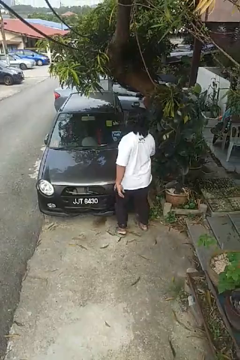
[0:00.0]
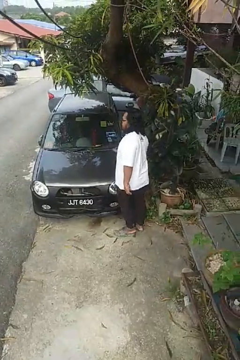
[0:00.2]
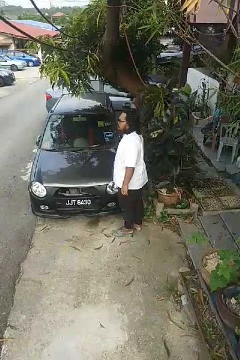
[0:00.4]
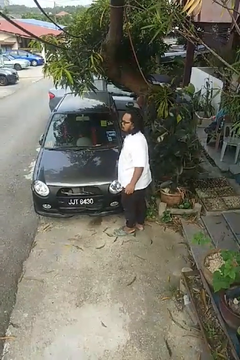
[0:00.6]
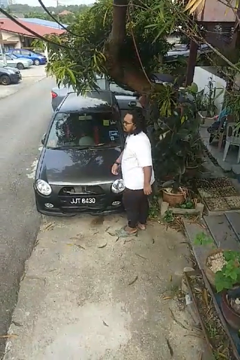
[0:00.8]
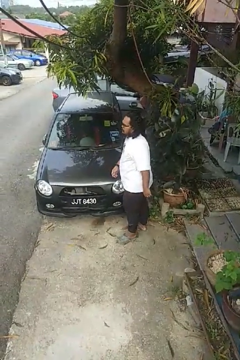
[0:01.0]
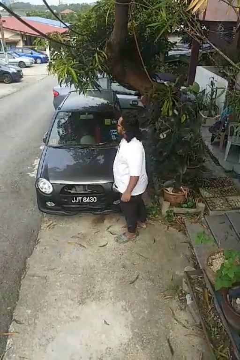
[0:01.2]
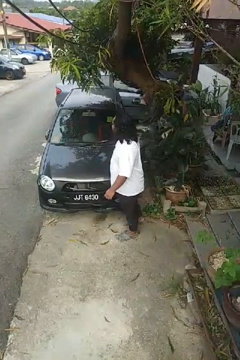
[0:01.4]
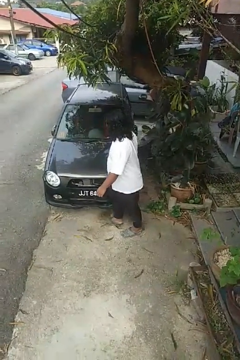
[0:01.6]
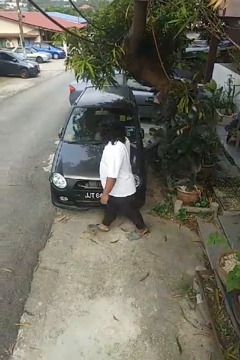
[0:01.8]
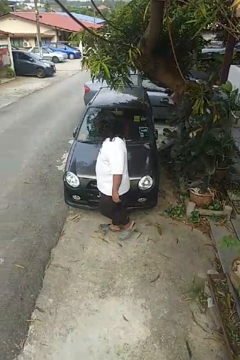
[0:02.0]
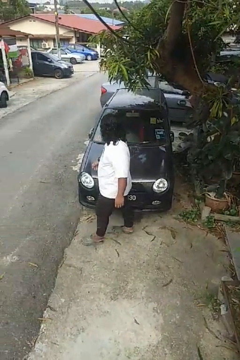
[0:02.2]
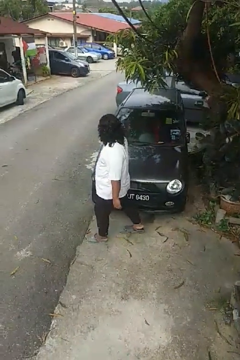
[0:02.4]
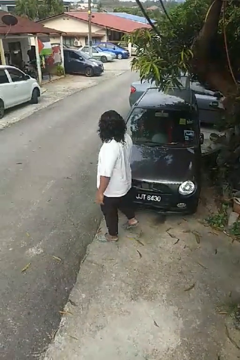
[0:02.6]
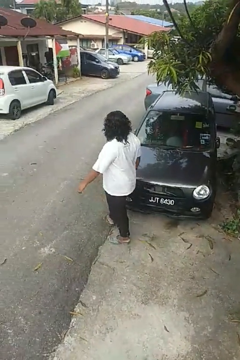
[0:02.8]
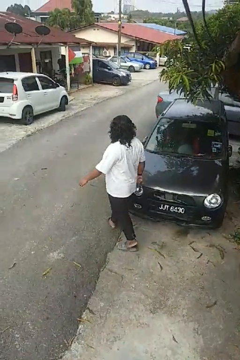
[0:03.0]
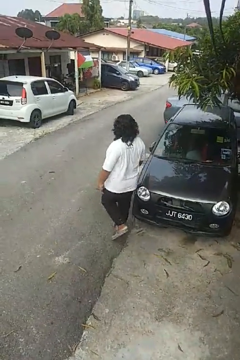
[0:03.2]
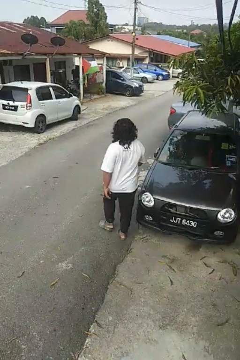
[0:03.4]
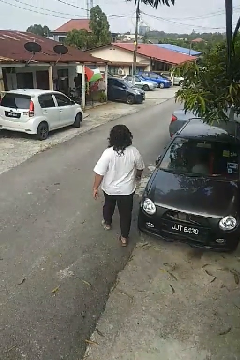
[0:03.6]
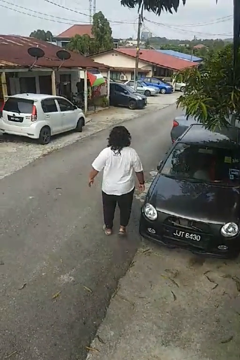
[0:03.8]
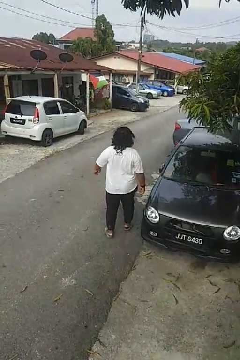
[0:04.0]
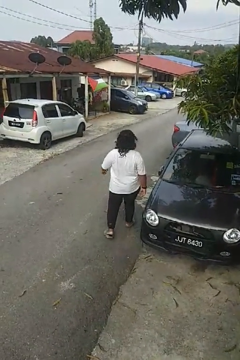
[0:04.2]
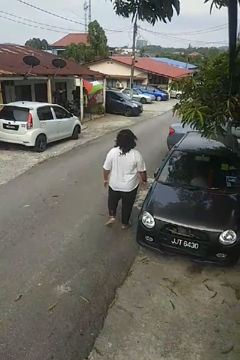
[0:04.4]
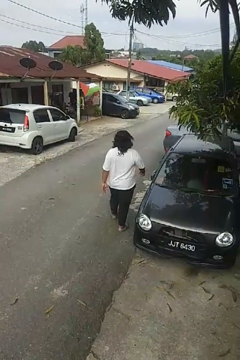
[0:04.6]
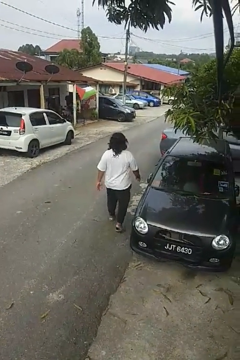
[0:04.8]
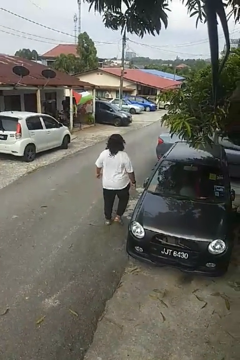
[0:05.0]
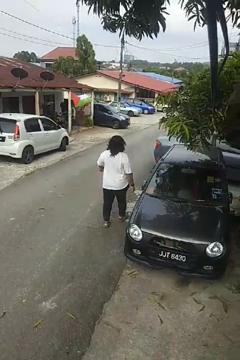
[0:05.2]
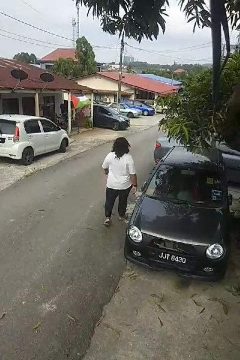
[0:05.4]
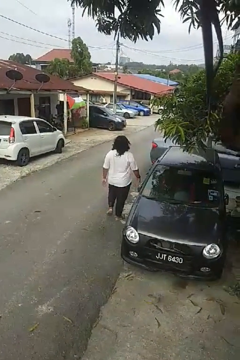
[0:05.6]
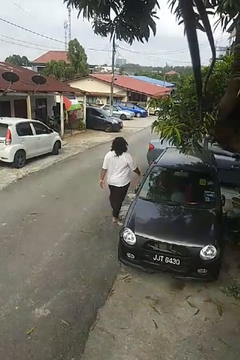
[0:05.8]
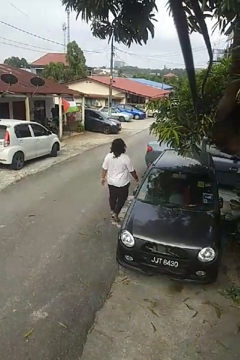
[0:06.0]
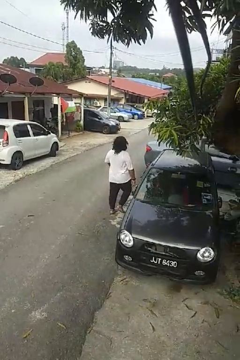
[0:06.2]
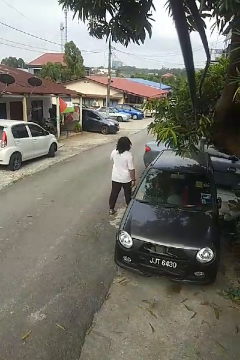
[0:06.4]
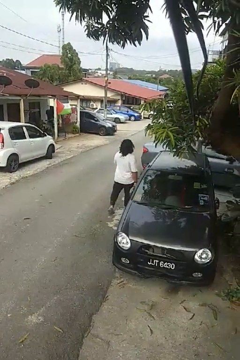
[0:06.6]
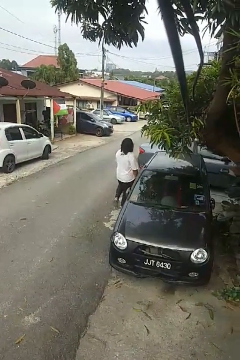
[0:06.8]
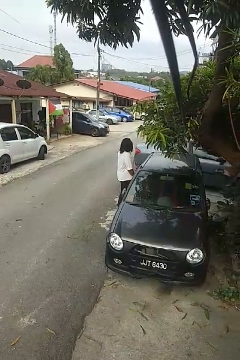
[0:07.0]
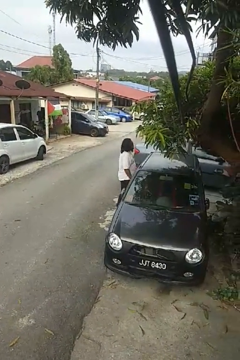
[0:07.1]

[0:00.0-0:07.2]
person walks around car

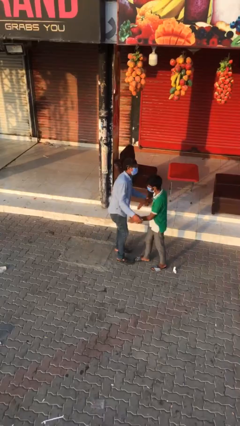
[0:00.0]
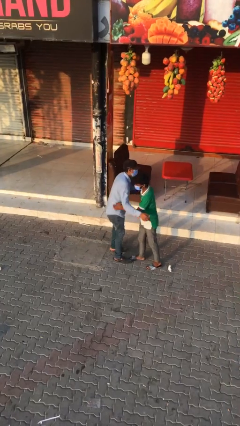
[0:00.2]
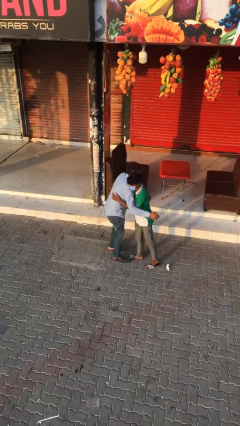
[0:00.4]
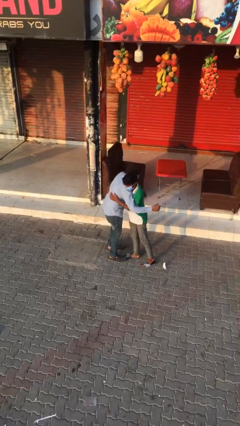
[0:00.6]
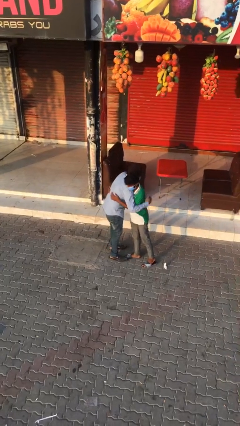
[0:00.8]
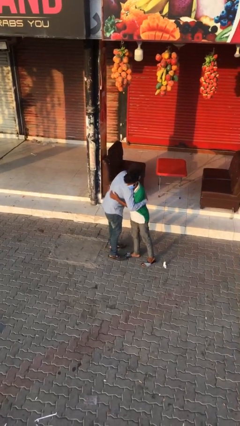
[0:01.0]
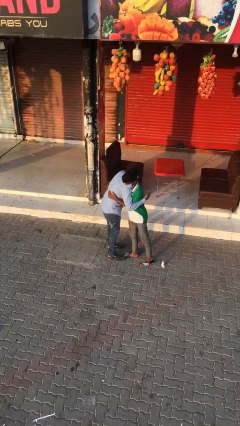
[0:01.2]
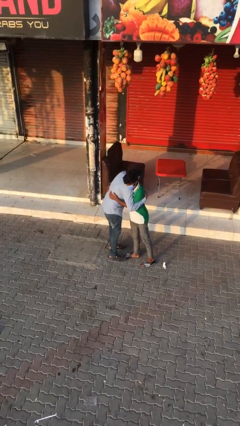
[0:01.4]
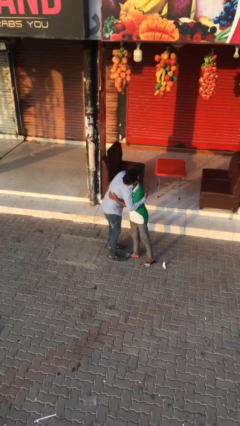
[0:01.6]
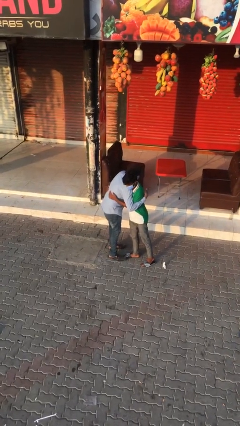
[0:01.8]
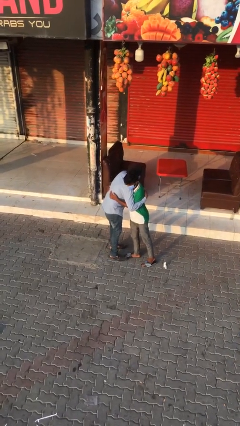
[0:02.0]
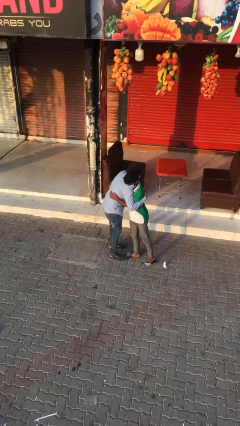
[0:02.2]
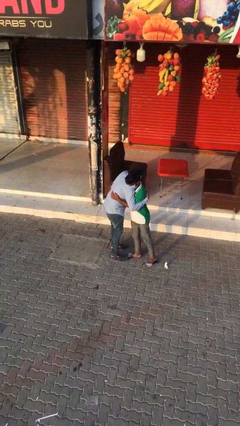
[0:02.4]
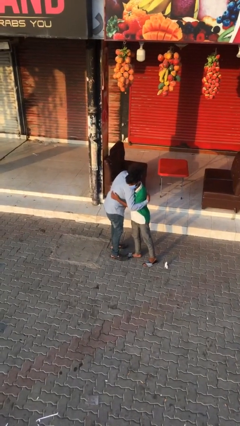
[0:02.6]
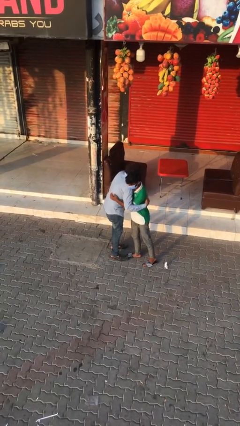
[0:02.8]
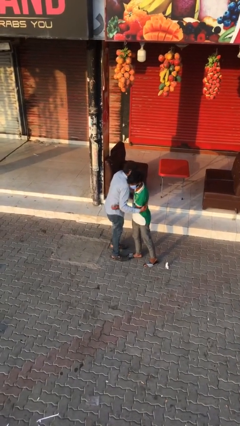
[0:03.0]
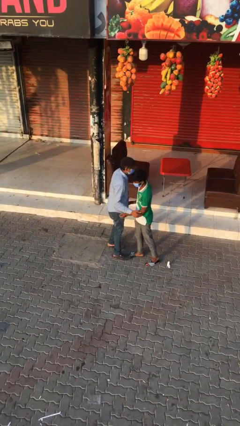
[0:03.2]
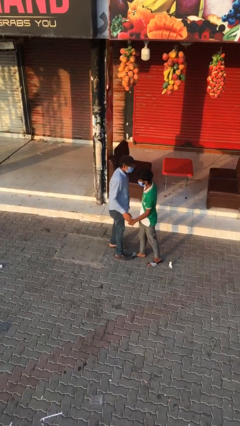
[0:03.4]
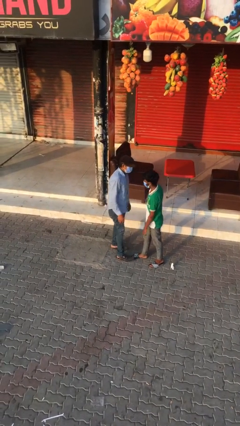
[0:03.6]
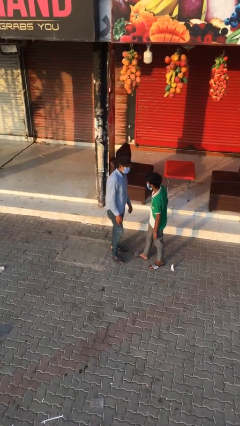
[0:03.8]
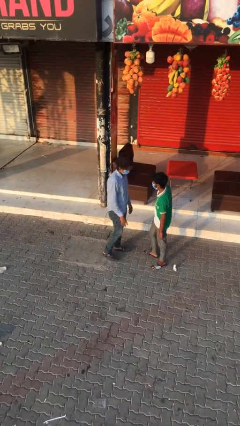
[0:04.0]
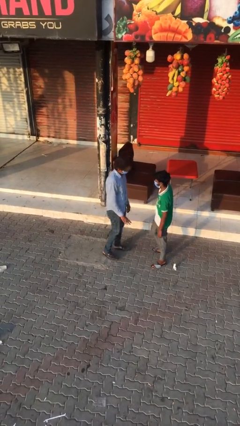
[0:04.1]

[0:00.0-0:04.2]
person embraces person

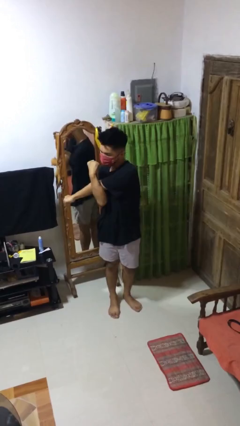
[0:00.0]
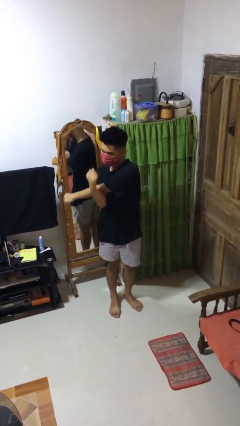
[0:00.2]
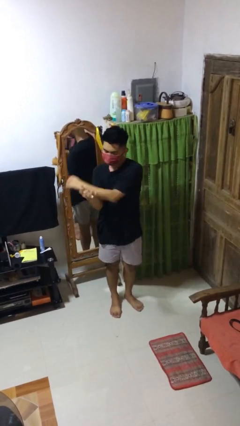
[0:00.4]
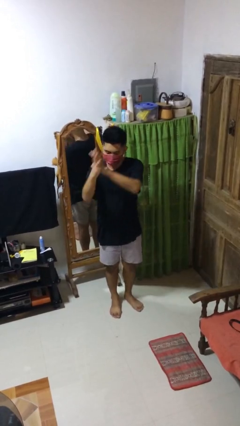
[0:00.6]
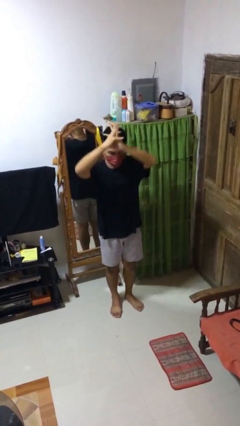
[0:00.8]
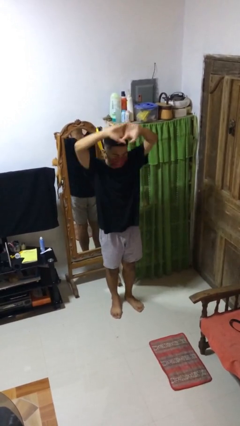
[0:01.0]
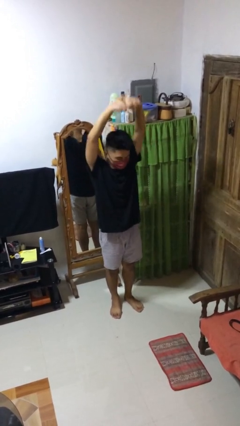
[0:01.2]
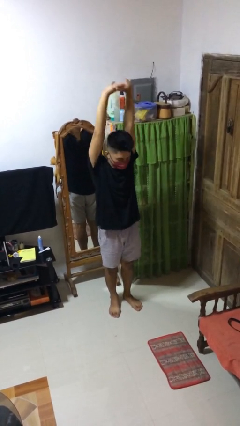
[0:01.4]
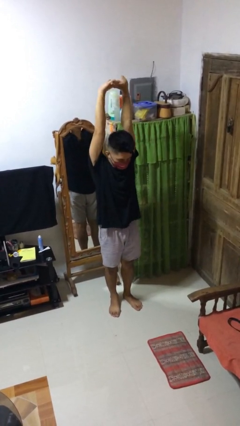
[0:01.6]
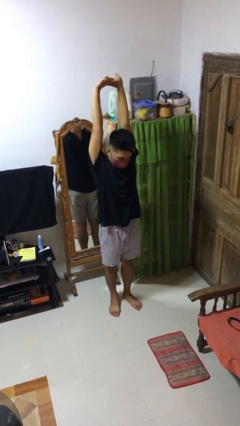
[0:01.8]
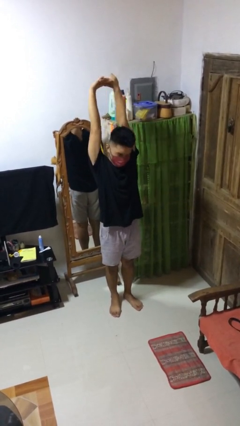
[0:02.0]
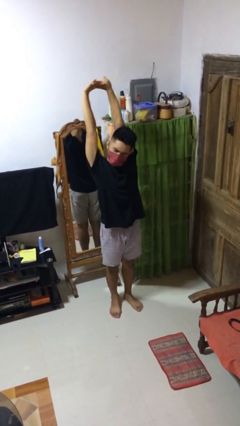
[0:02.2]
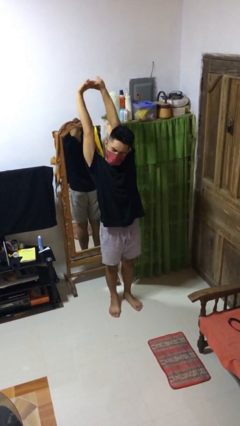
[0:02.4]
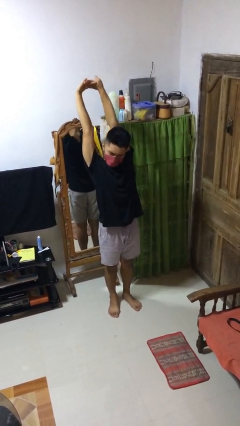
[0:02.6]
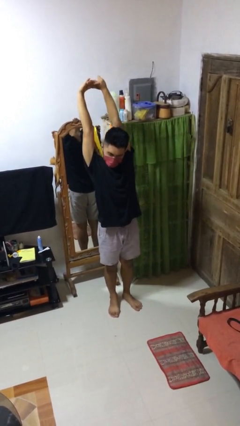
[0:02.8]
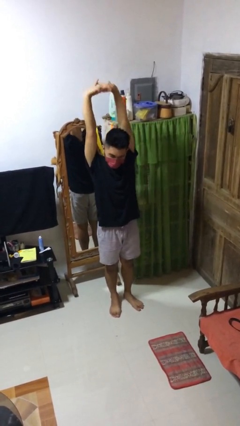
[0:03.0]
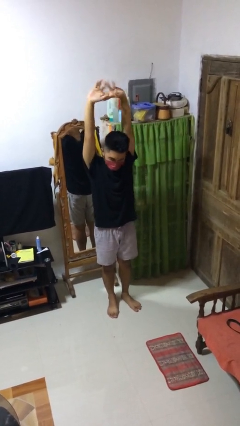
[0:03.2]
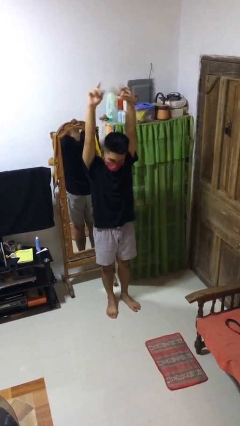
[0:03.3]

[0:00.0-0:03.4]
person stretches arms over head

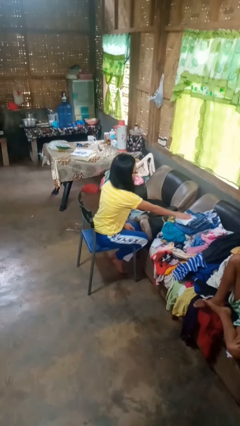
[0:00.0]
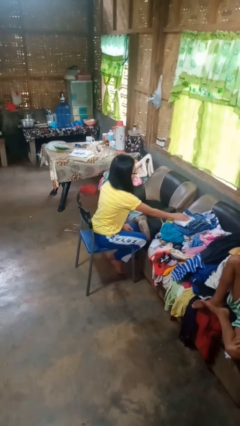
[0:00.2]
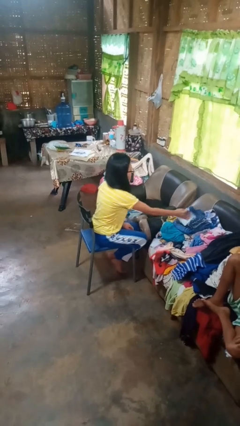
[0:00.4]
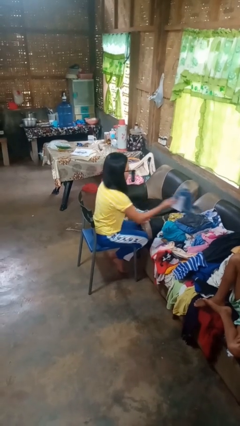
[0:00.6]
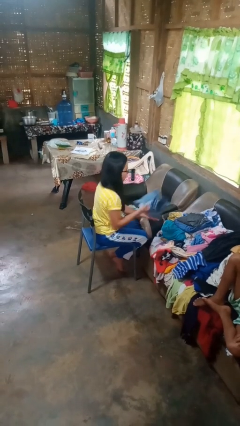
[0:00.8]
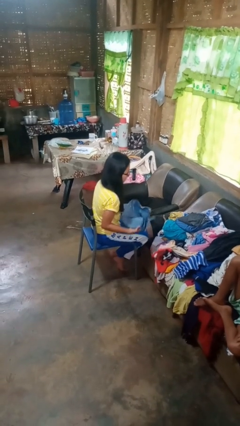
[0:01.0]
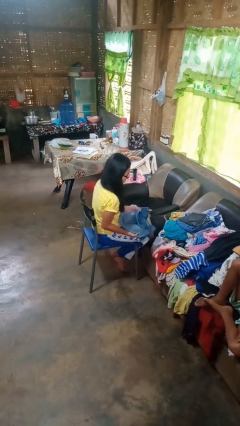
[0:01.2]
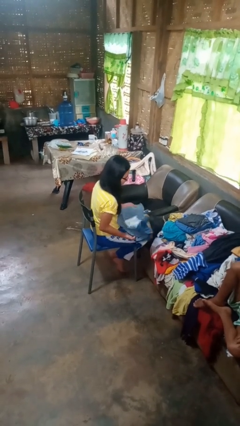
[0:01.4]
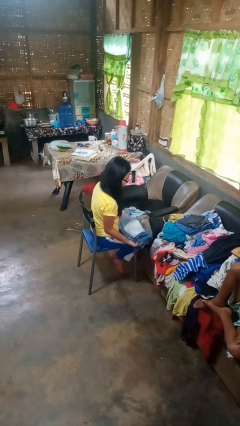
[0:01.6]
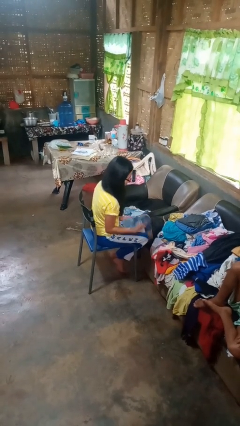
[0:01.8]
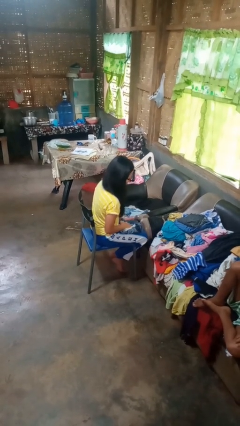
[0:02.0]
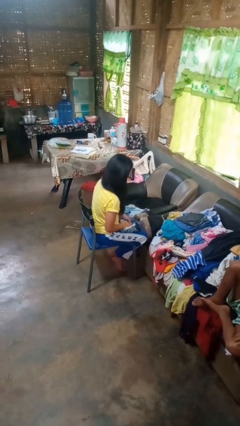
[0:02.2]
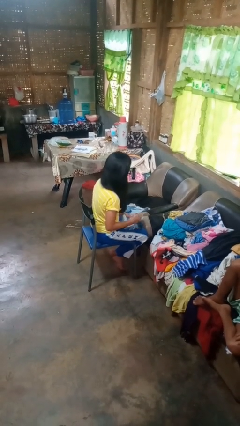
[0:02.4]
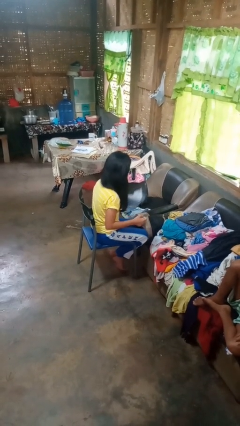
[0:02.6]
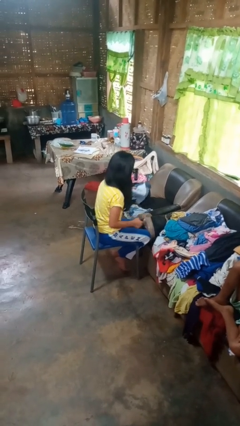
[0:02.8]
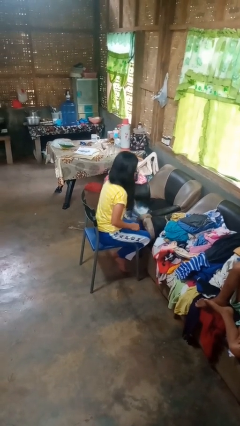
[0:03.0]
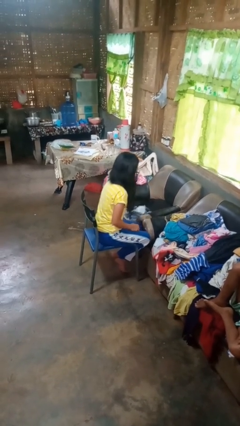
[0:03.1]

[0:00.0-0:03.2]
person folds pants

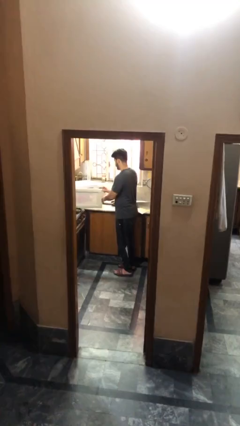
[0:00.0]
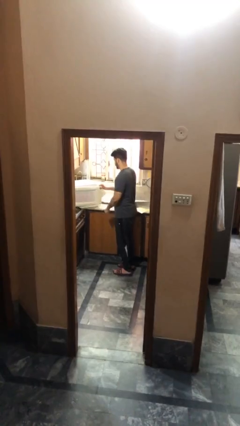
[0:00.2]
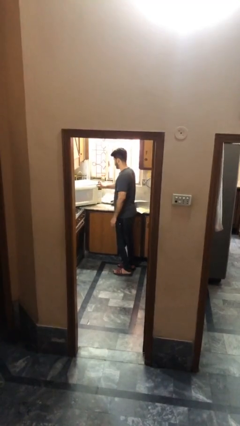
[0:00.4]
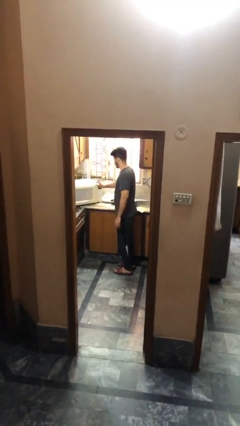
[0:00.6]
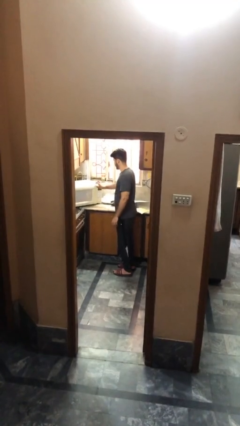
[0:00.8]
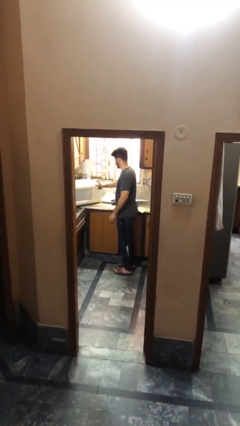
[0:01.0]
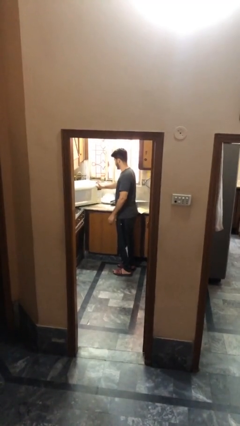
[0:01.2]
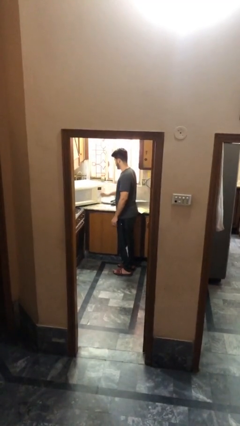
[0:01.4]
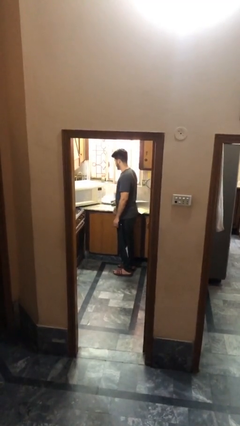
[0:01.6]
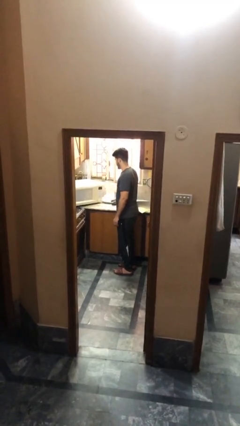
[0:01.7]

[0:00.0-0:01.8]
person closes microwave
